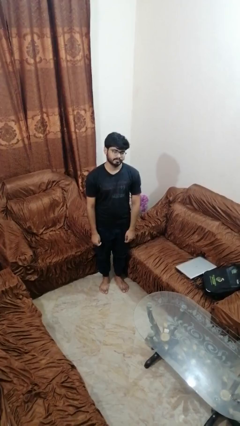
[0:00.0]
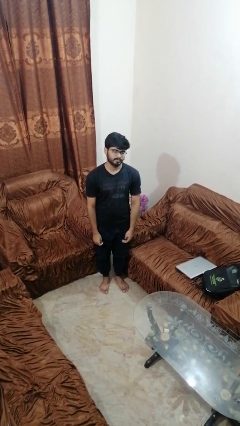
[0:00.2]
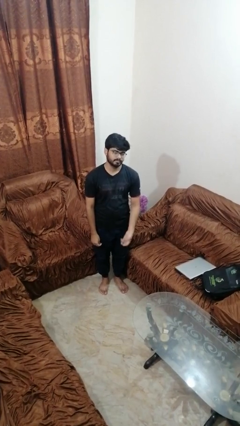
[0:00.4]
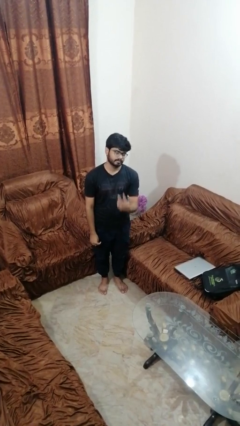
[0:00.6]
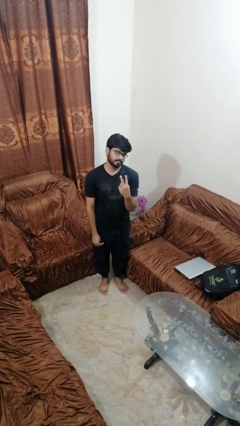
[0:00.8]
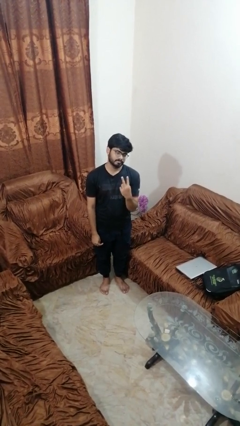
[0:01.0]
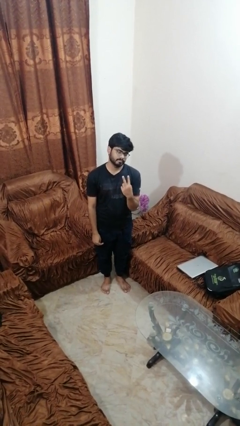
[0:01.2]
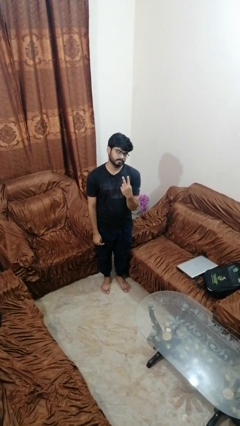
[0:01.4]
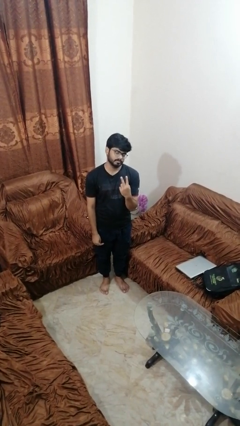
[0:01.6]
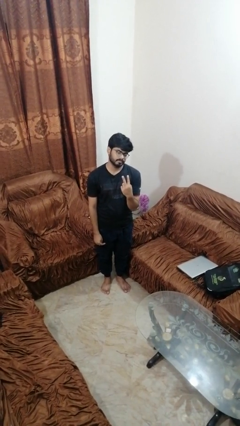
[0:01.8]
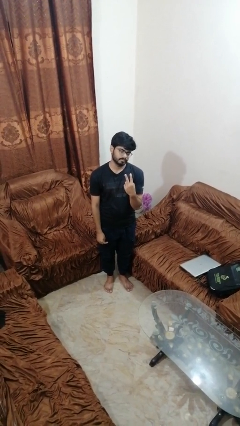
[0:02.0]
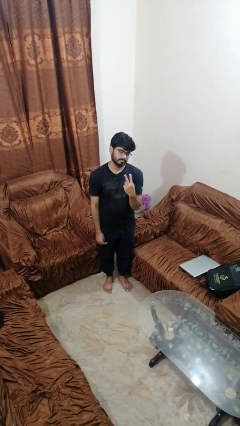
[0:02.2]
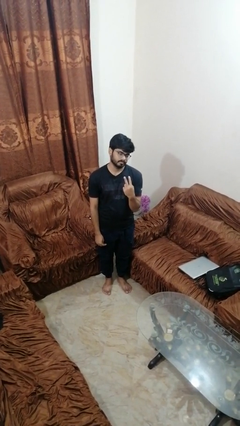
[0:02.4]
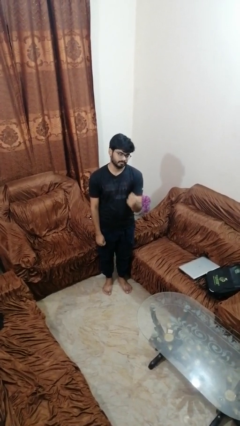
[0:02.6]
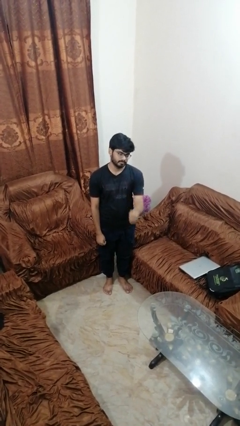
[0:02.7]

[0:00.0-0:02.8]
person gestures peace

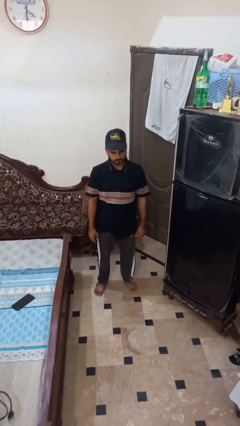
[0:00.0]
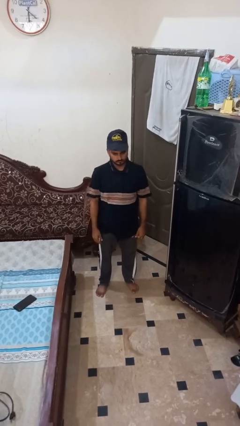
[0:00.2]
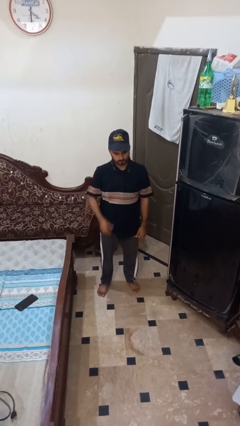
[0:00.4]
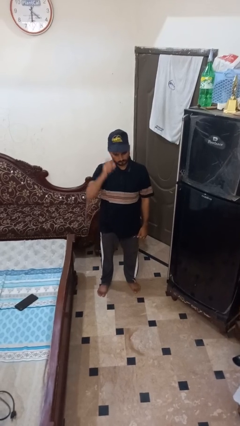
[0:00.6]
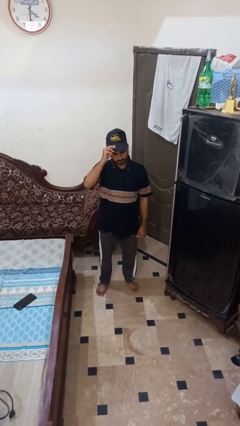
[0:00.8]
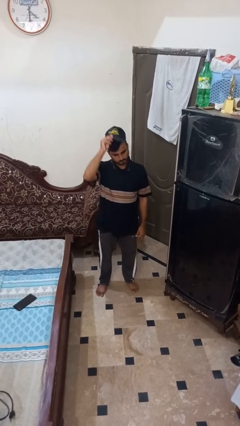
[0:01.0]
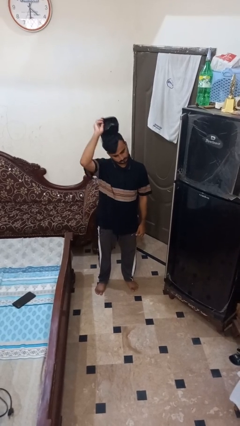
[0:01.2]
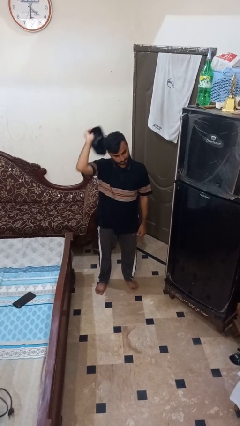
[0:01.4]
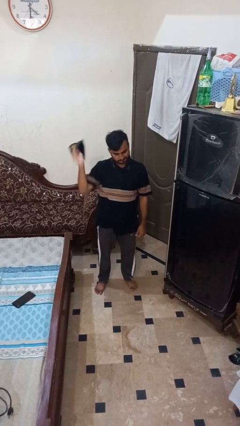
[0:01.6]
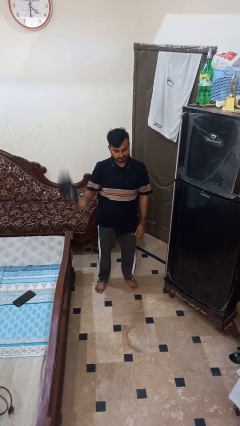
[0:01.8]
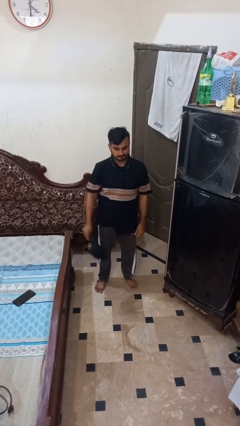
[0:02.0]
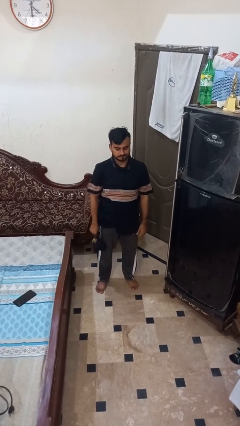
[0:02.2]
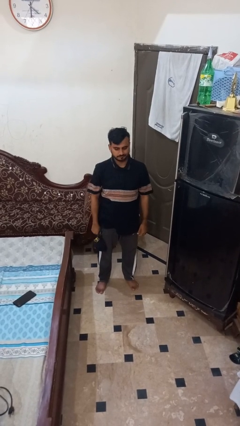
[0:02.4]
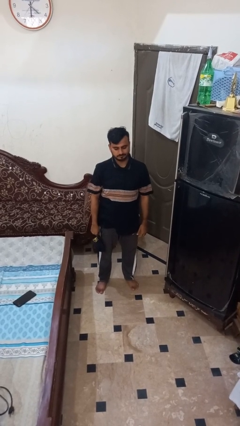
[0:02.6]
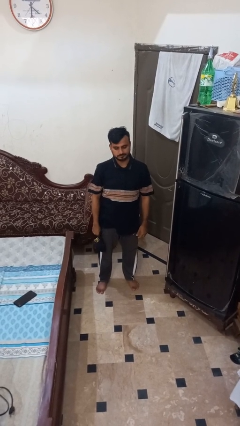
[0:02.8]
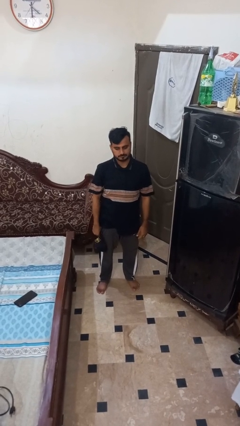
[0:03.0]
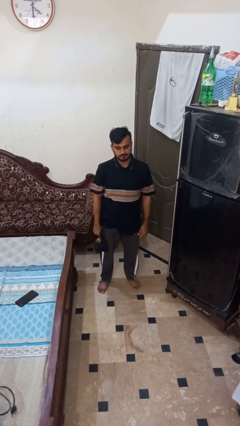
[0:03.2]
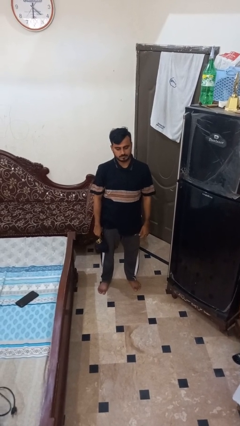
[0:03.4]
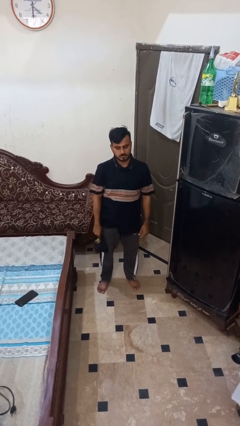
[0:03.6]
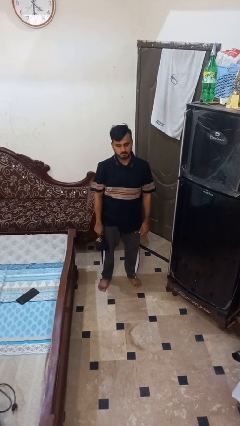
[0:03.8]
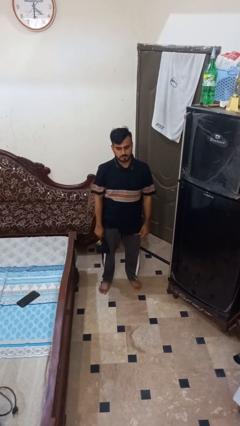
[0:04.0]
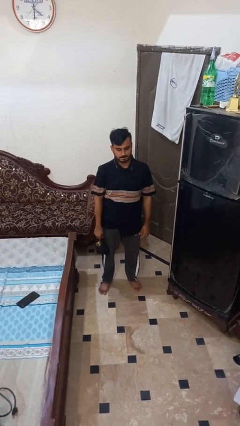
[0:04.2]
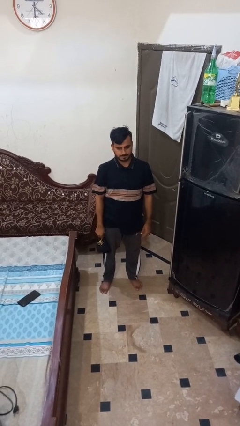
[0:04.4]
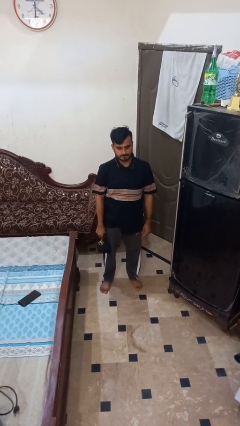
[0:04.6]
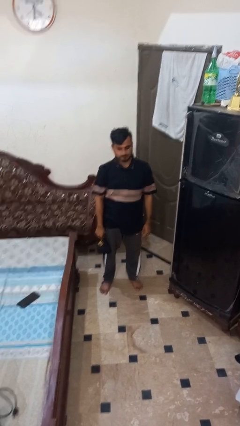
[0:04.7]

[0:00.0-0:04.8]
person takes off hat

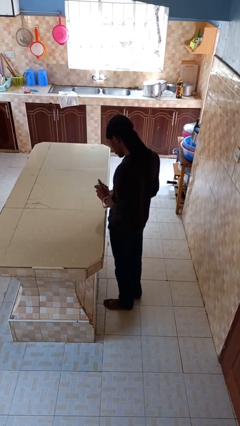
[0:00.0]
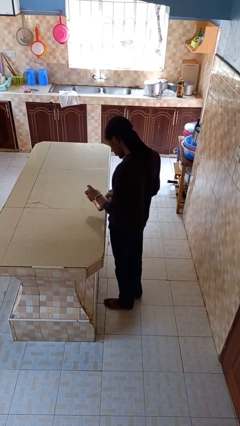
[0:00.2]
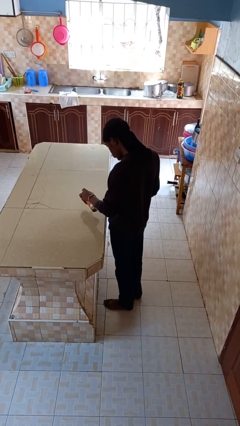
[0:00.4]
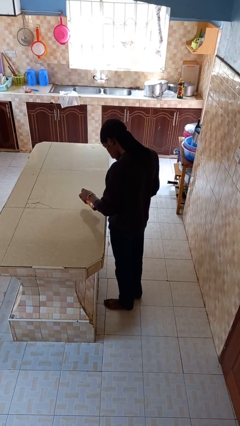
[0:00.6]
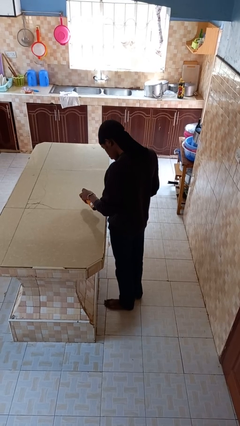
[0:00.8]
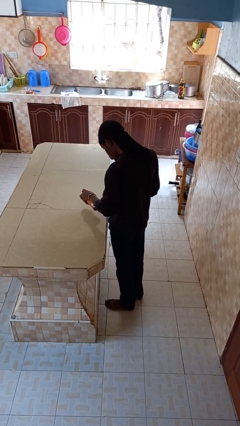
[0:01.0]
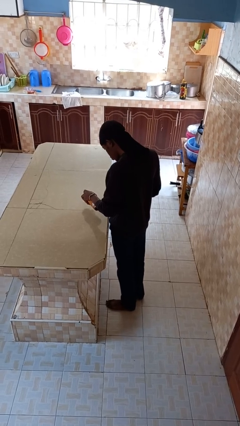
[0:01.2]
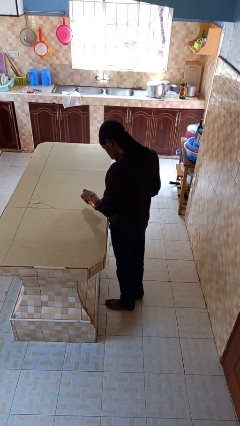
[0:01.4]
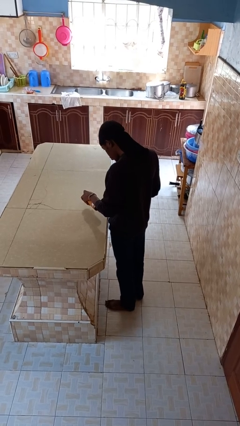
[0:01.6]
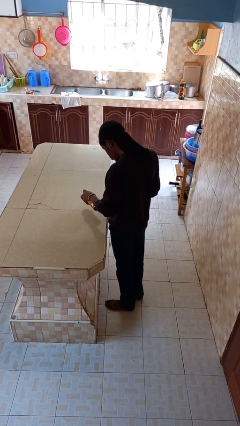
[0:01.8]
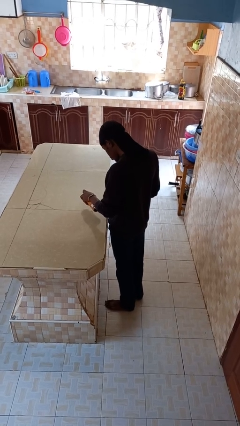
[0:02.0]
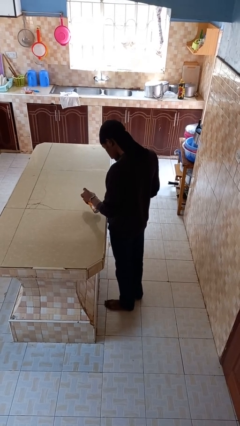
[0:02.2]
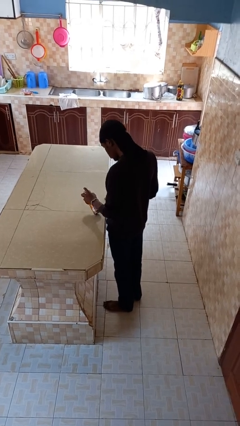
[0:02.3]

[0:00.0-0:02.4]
person sprays from bottle

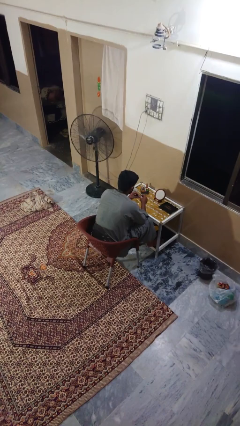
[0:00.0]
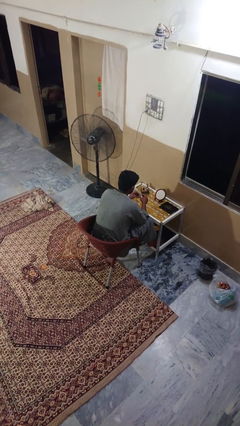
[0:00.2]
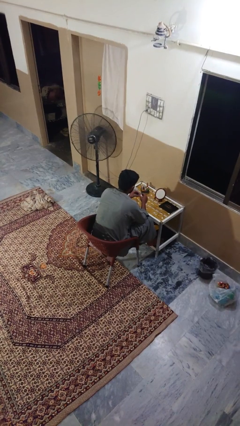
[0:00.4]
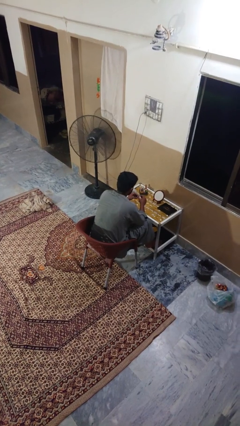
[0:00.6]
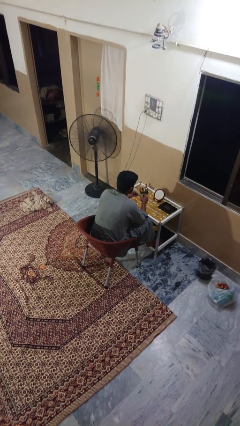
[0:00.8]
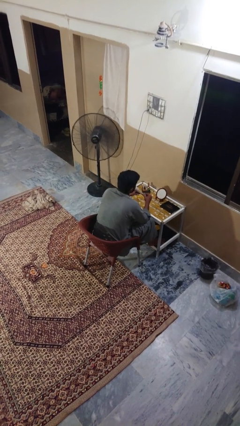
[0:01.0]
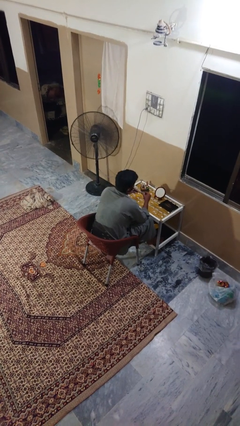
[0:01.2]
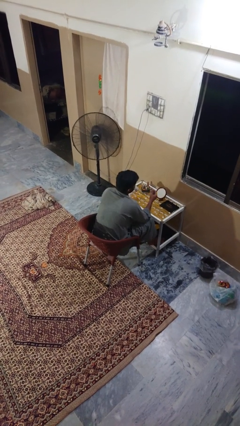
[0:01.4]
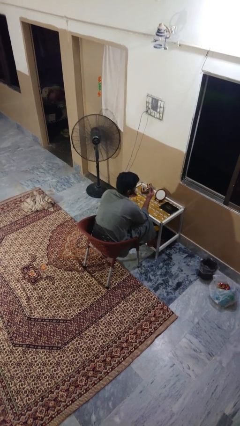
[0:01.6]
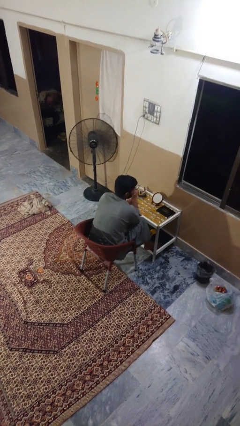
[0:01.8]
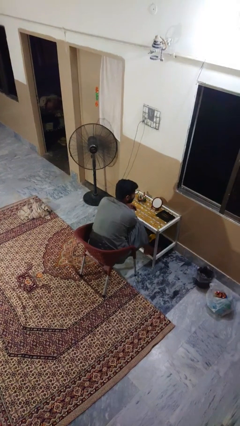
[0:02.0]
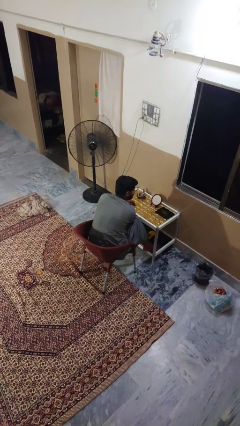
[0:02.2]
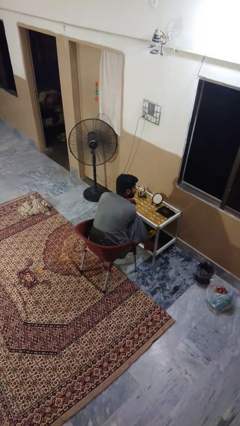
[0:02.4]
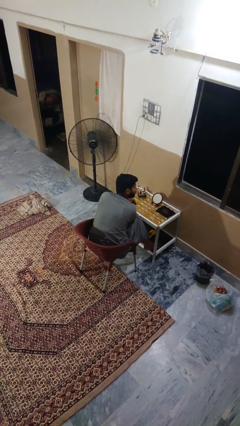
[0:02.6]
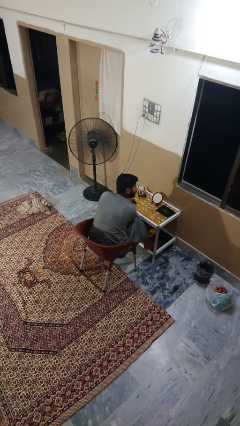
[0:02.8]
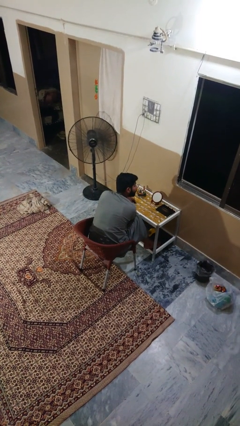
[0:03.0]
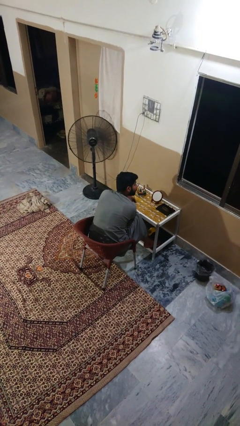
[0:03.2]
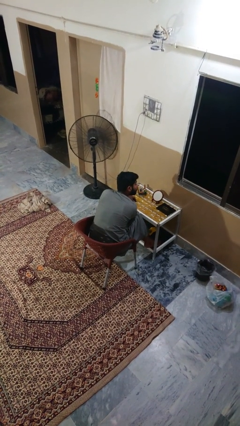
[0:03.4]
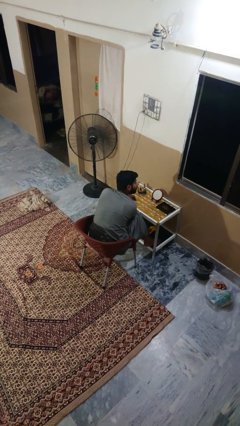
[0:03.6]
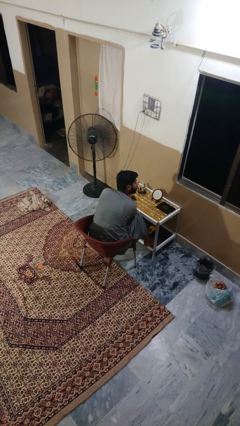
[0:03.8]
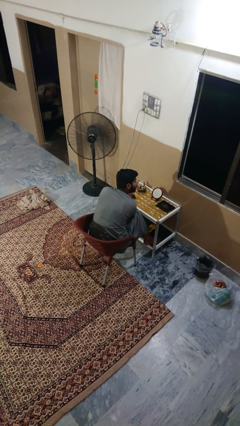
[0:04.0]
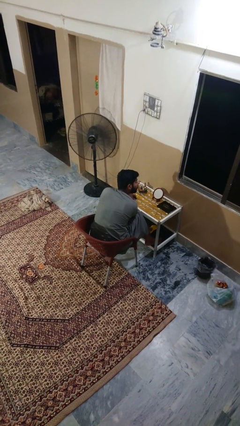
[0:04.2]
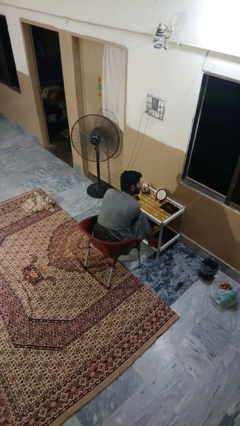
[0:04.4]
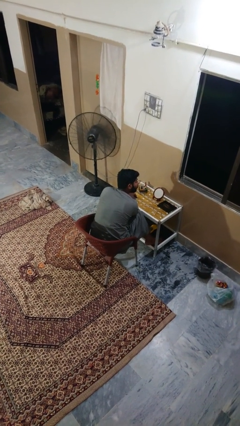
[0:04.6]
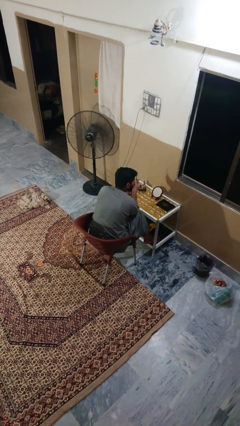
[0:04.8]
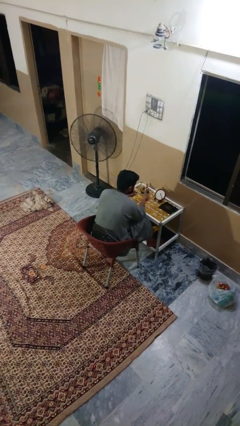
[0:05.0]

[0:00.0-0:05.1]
person applies eye makeup

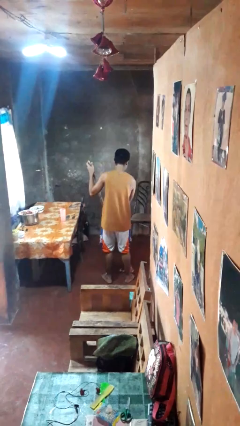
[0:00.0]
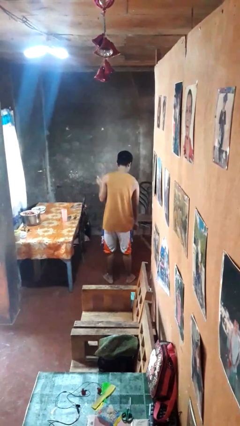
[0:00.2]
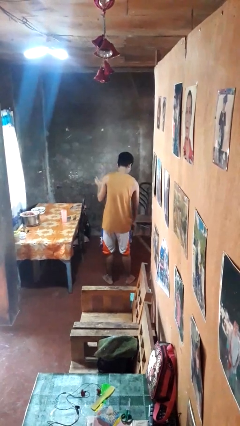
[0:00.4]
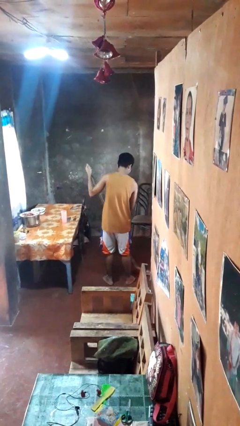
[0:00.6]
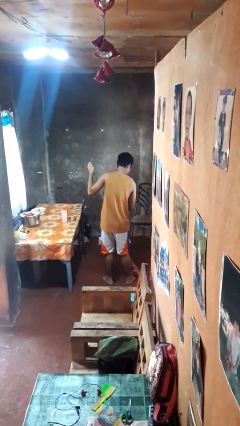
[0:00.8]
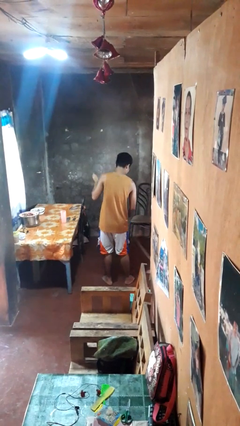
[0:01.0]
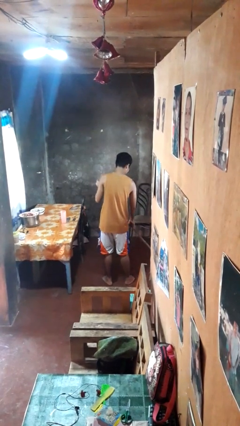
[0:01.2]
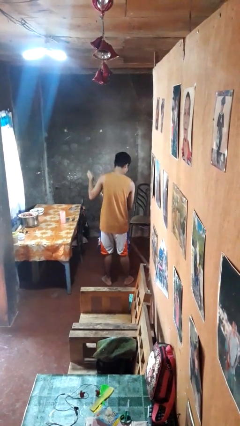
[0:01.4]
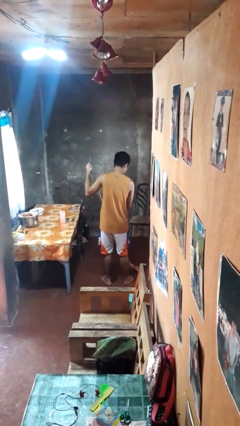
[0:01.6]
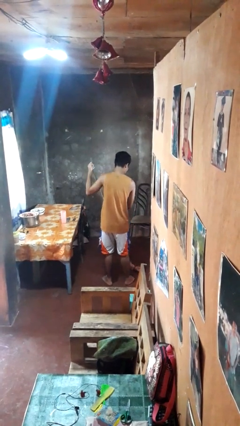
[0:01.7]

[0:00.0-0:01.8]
person mops

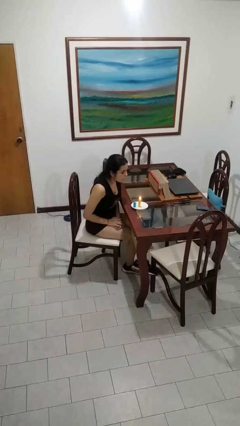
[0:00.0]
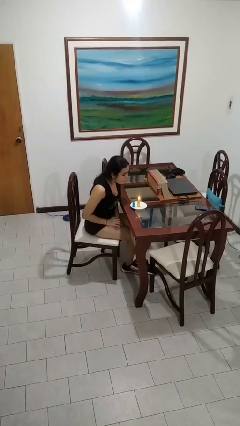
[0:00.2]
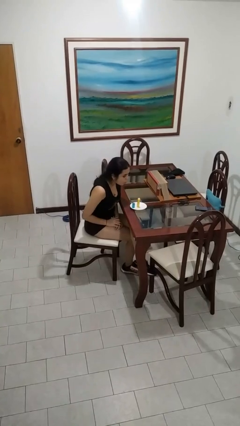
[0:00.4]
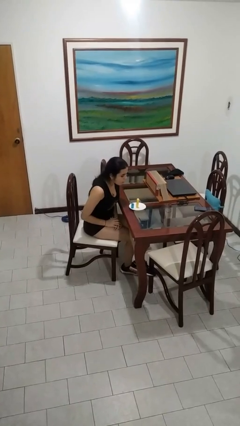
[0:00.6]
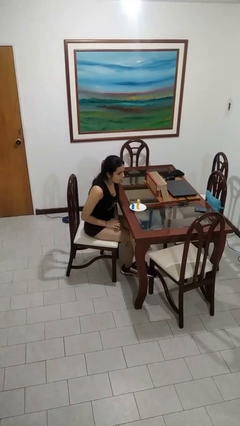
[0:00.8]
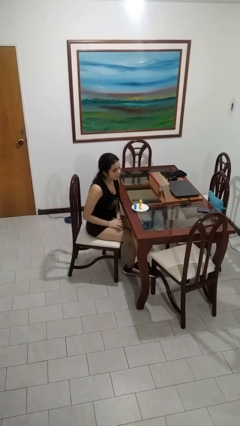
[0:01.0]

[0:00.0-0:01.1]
person extinguishes candle
